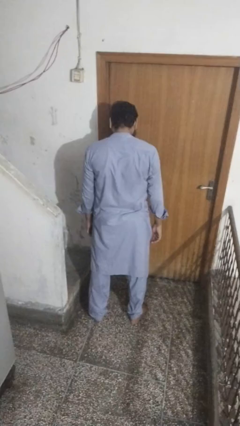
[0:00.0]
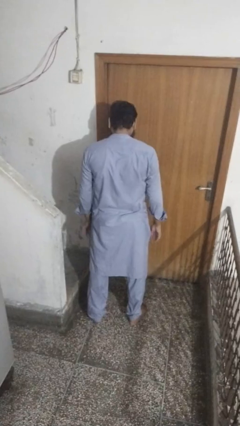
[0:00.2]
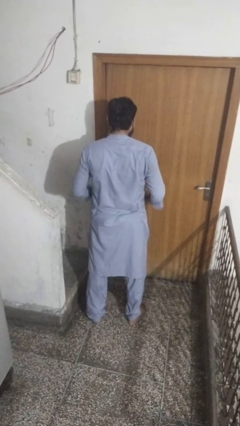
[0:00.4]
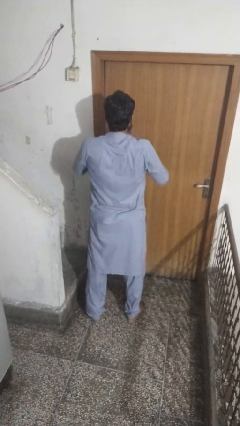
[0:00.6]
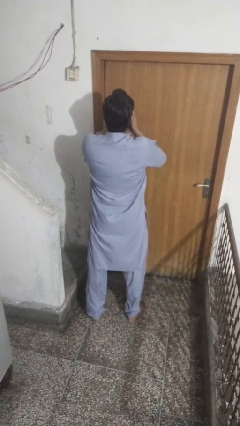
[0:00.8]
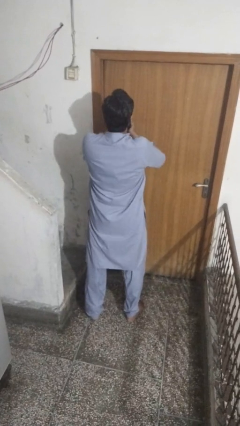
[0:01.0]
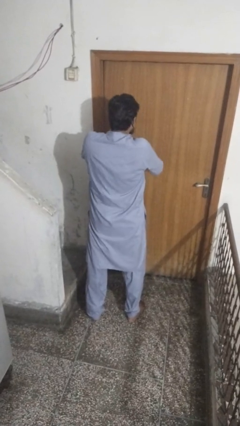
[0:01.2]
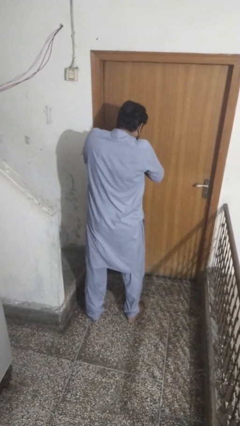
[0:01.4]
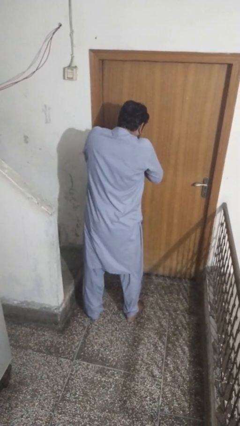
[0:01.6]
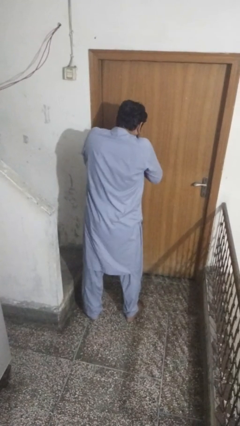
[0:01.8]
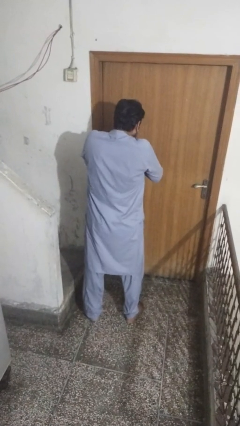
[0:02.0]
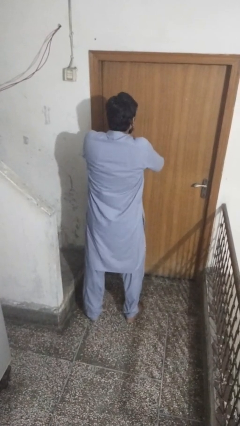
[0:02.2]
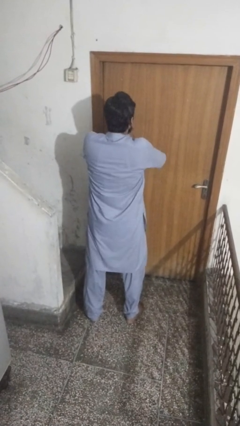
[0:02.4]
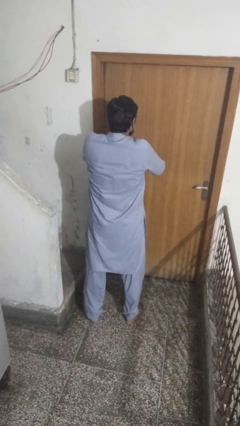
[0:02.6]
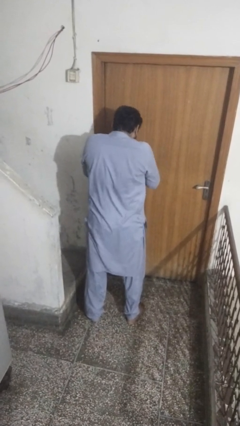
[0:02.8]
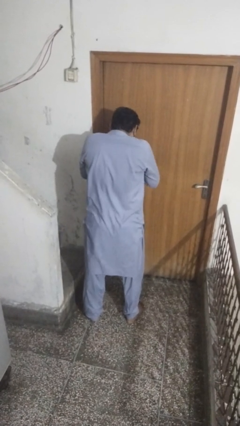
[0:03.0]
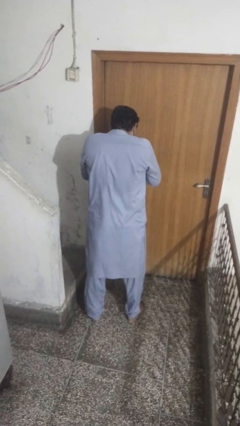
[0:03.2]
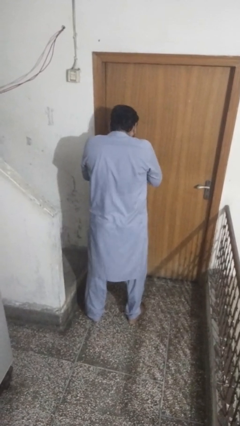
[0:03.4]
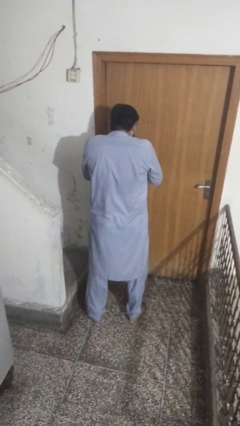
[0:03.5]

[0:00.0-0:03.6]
person sneezes into hand

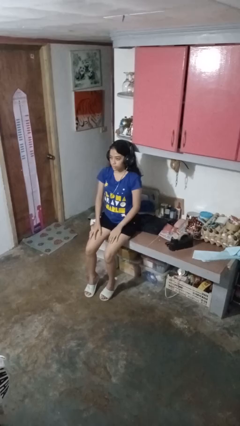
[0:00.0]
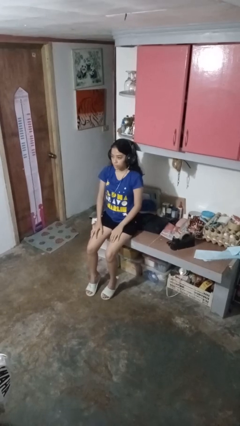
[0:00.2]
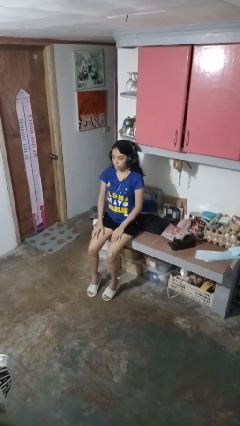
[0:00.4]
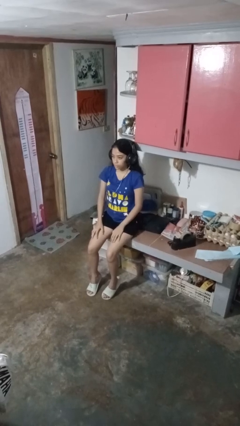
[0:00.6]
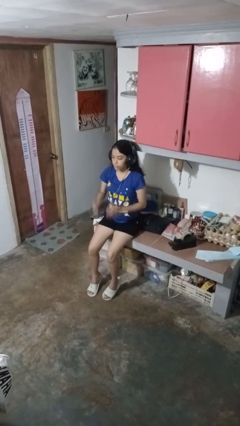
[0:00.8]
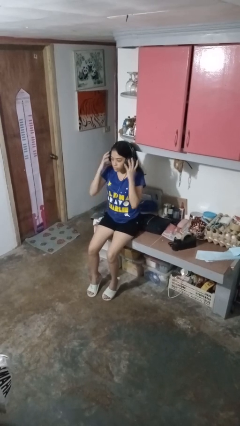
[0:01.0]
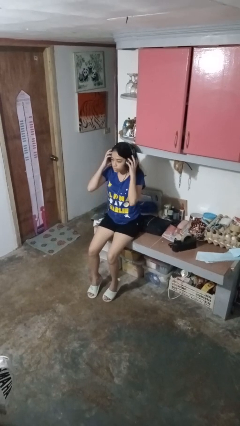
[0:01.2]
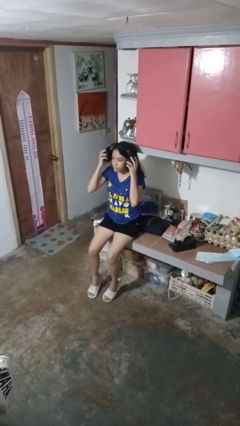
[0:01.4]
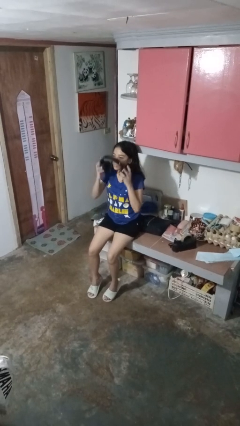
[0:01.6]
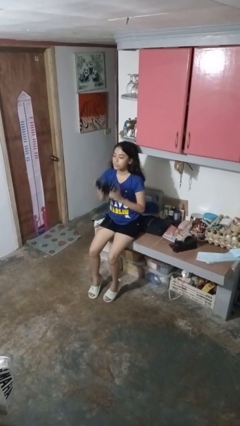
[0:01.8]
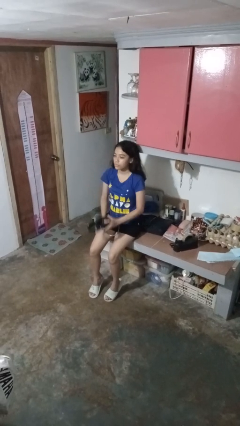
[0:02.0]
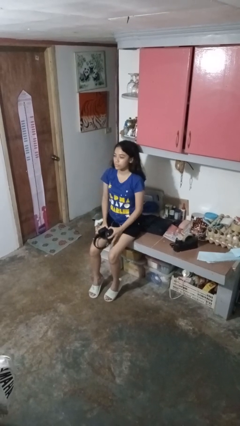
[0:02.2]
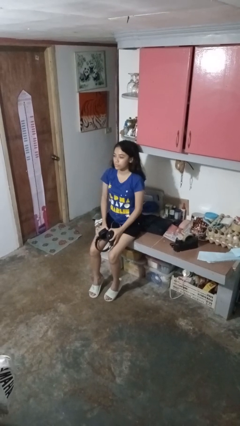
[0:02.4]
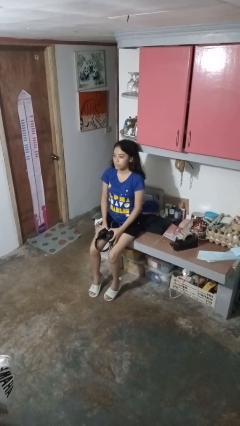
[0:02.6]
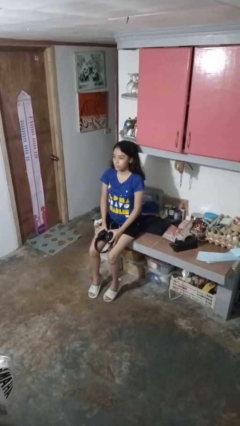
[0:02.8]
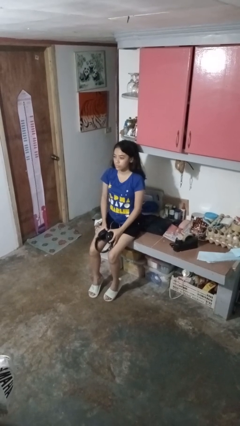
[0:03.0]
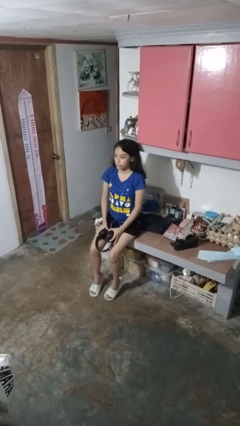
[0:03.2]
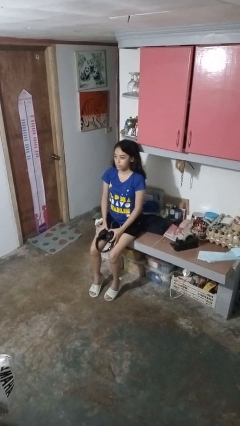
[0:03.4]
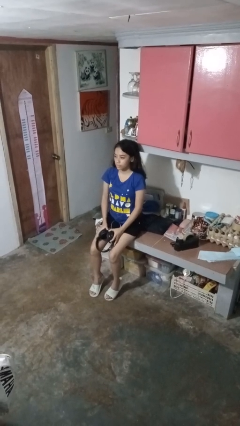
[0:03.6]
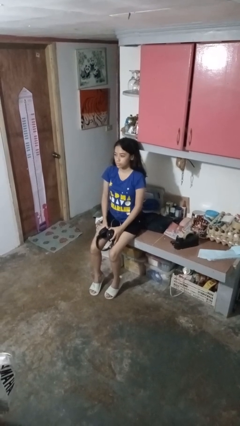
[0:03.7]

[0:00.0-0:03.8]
person takes off headphones

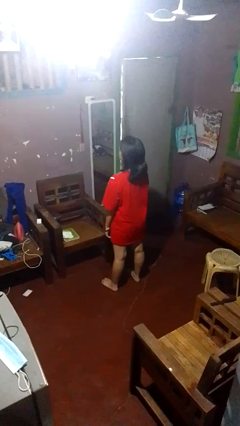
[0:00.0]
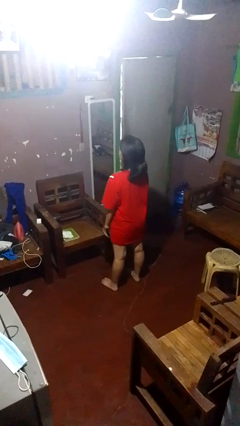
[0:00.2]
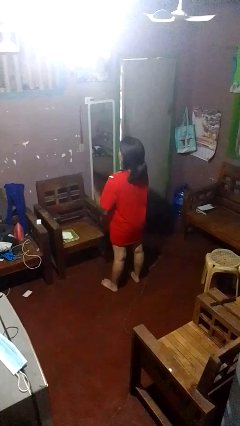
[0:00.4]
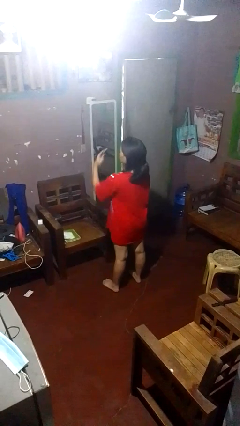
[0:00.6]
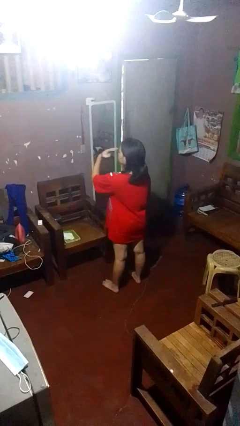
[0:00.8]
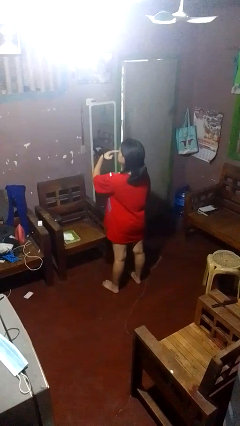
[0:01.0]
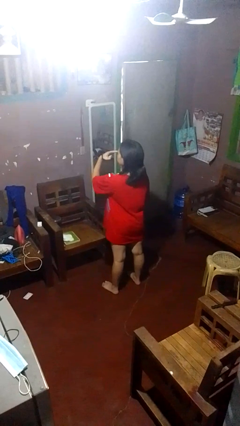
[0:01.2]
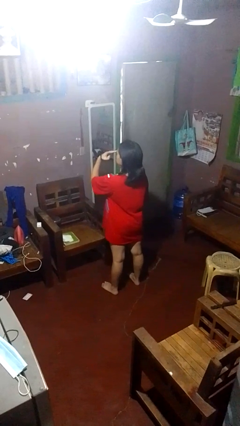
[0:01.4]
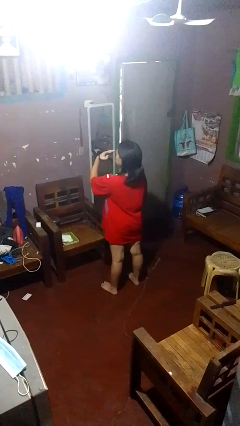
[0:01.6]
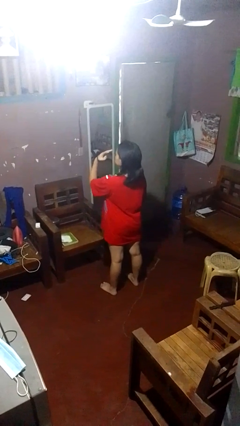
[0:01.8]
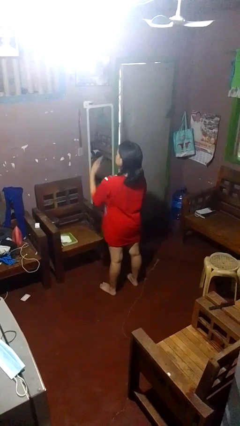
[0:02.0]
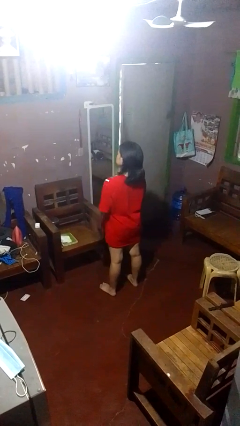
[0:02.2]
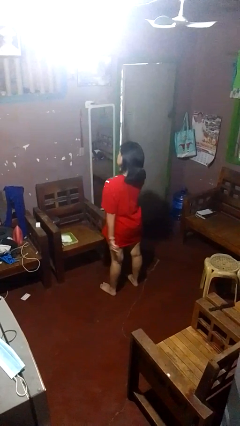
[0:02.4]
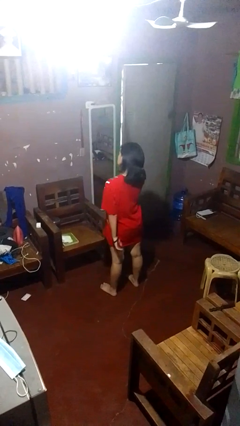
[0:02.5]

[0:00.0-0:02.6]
person gestures watch closely

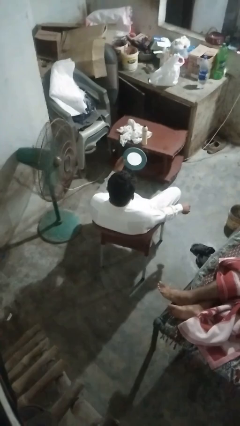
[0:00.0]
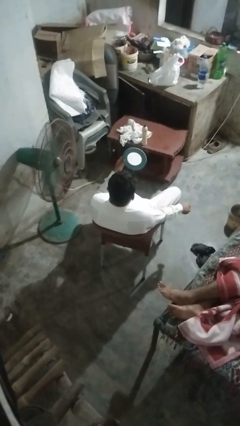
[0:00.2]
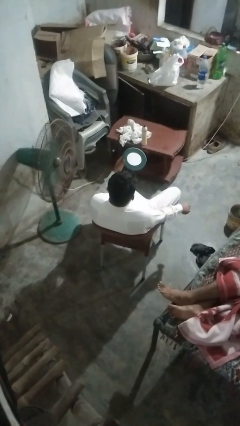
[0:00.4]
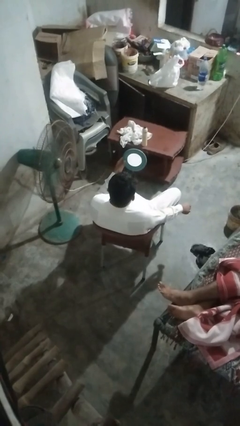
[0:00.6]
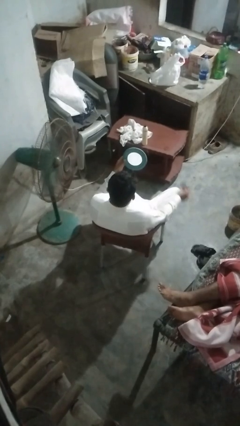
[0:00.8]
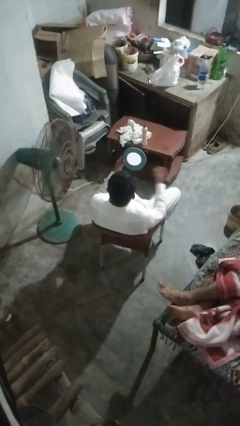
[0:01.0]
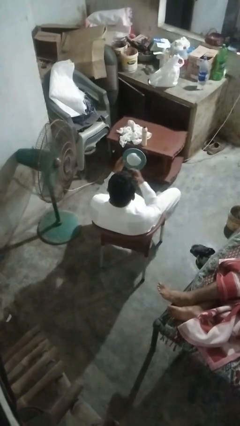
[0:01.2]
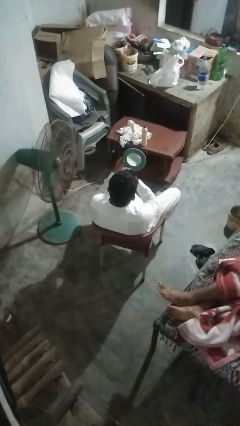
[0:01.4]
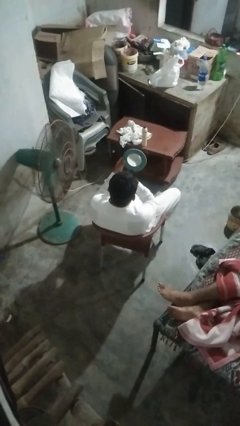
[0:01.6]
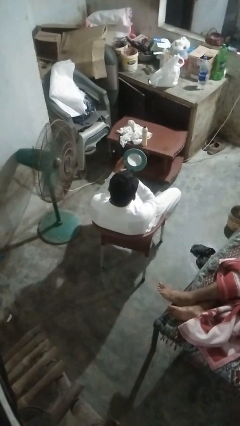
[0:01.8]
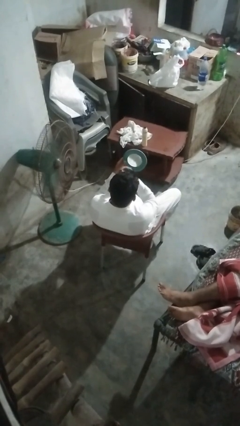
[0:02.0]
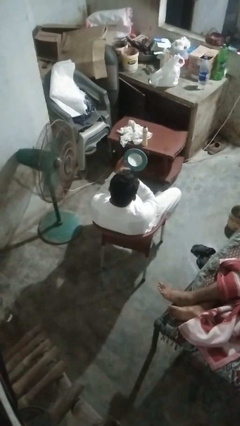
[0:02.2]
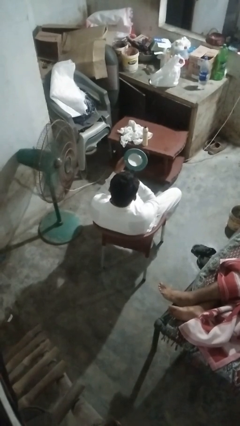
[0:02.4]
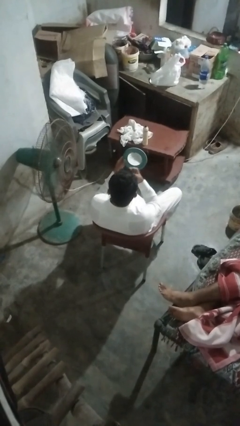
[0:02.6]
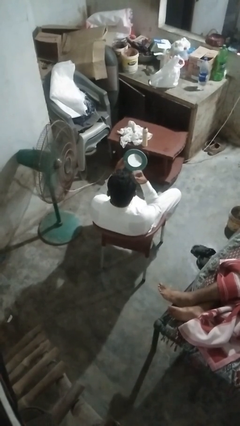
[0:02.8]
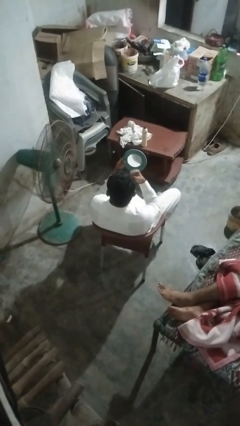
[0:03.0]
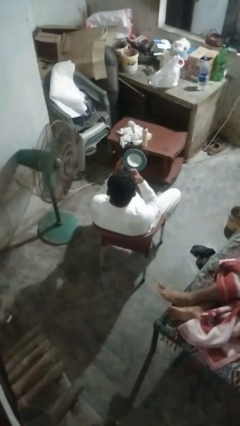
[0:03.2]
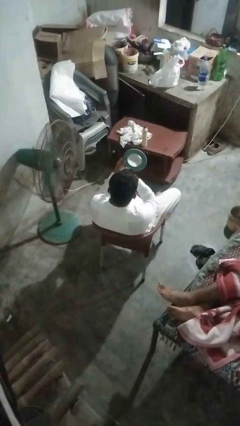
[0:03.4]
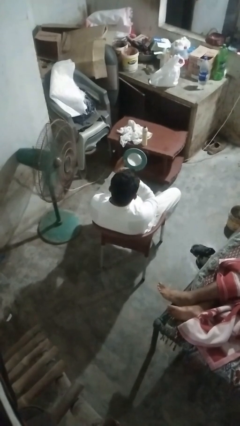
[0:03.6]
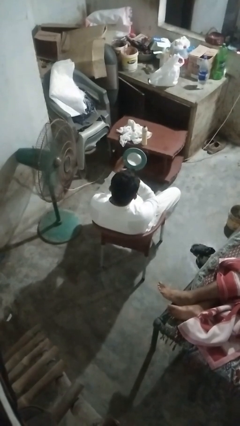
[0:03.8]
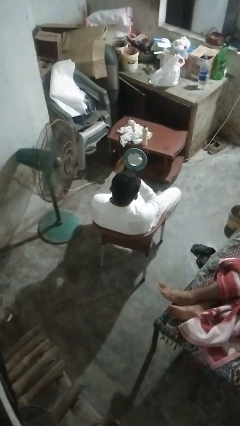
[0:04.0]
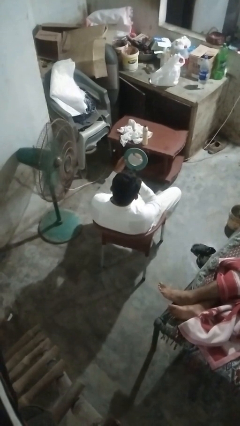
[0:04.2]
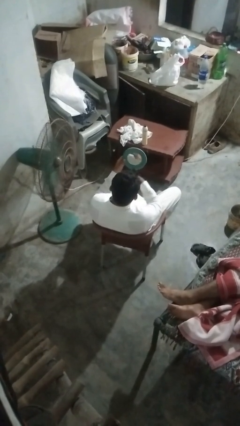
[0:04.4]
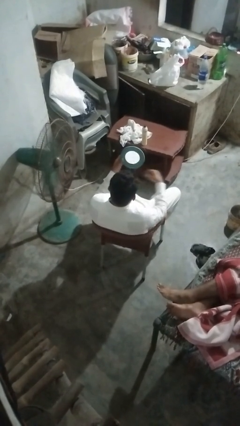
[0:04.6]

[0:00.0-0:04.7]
person applies eye makeup

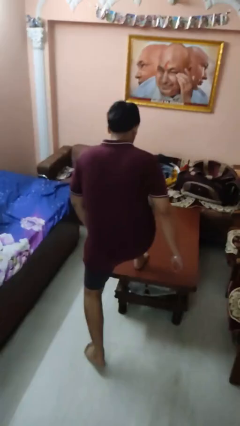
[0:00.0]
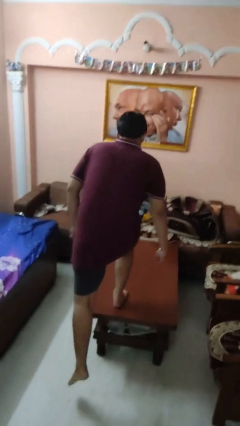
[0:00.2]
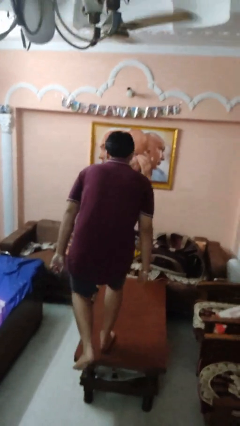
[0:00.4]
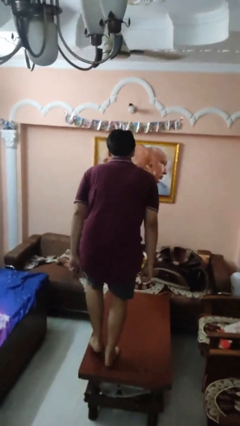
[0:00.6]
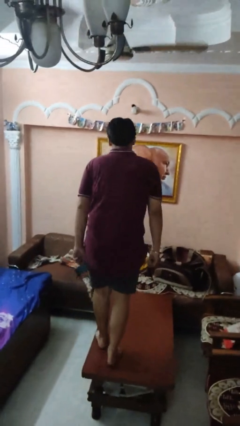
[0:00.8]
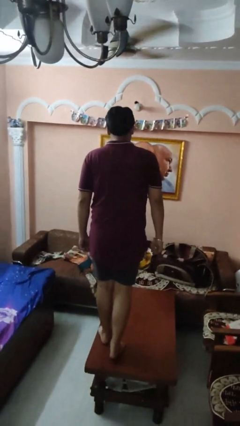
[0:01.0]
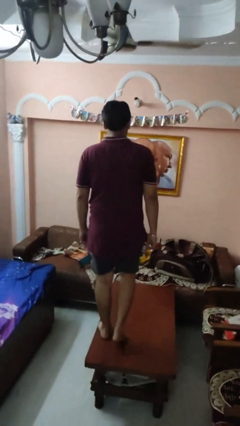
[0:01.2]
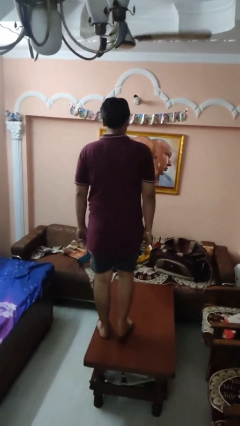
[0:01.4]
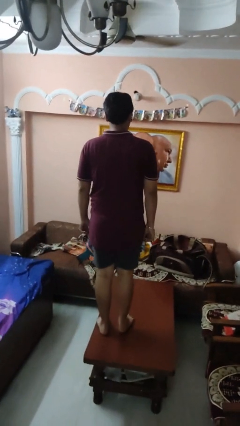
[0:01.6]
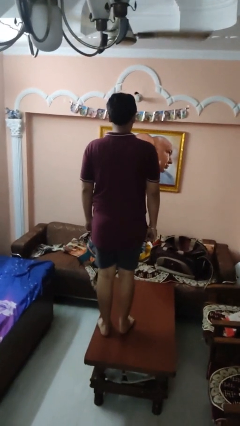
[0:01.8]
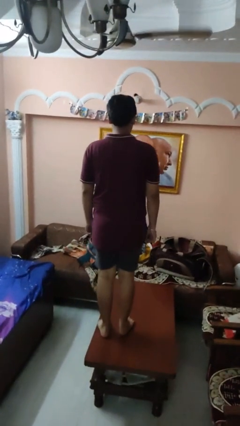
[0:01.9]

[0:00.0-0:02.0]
person climbs on table

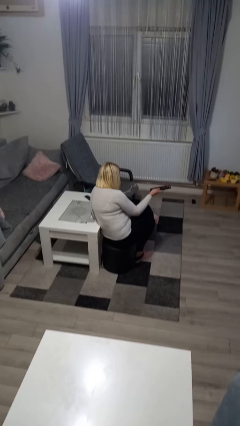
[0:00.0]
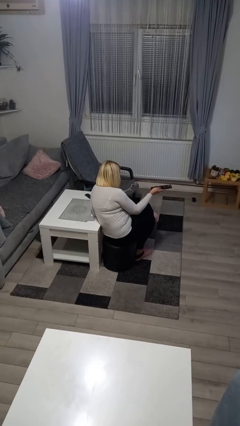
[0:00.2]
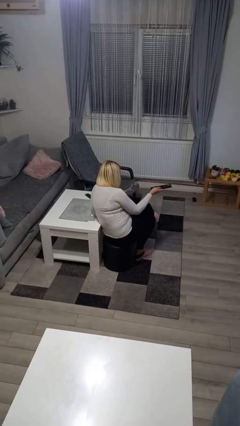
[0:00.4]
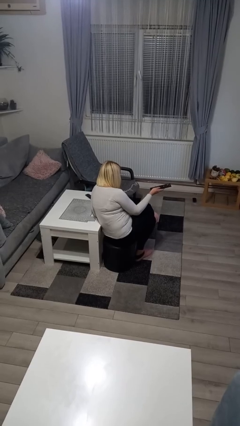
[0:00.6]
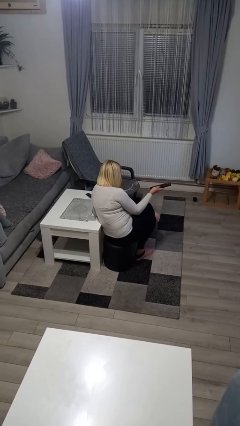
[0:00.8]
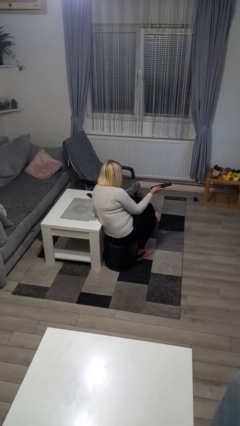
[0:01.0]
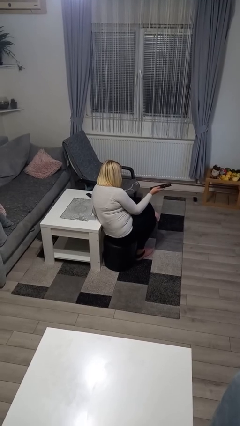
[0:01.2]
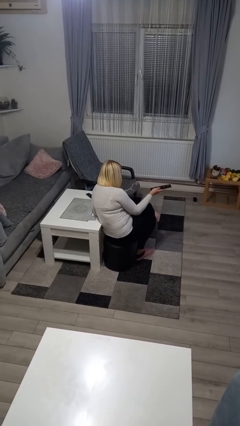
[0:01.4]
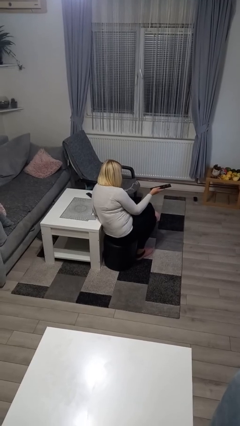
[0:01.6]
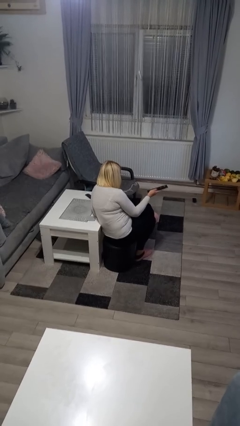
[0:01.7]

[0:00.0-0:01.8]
person uses television remote
